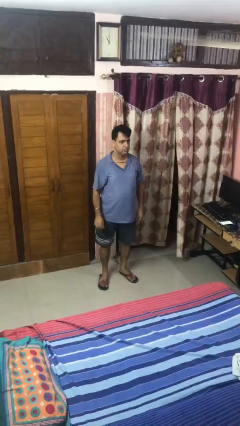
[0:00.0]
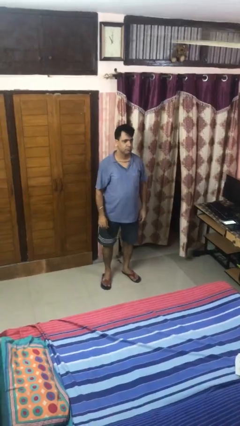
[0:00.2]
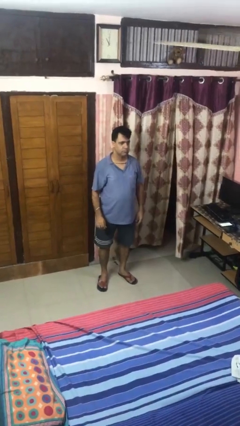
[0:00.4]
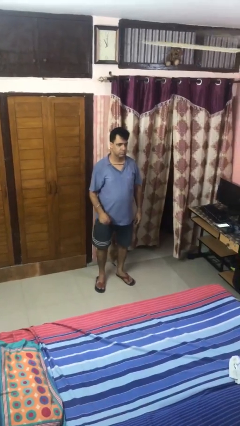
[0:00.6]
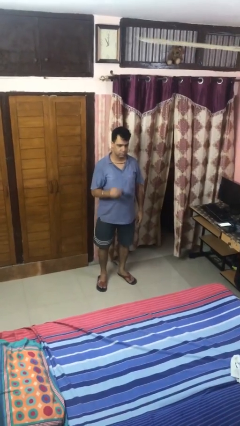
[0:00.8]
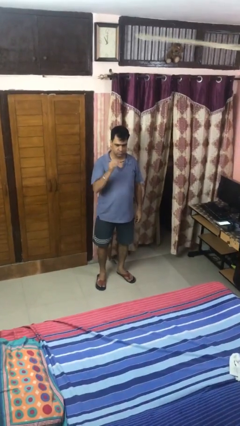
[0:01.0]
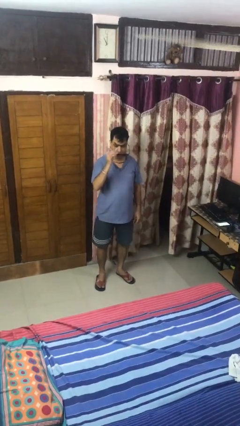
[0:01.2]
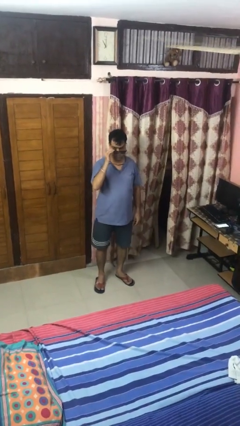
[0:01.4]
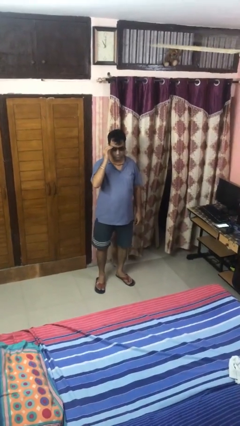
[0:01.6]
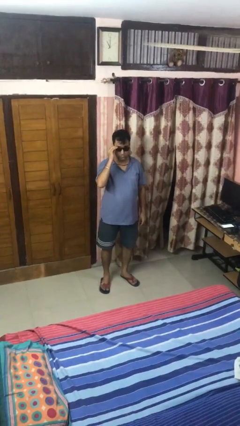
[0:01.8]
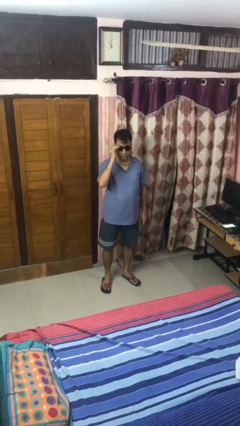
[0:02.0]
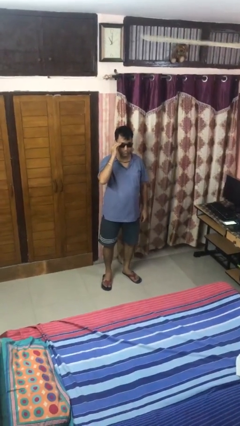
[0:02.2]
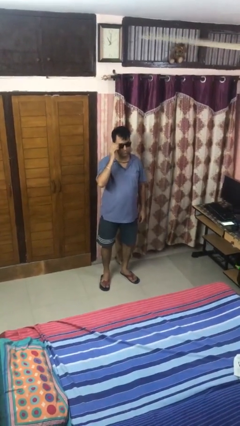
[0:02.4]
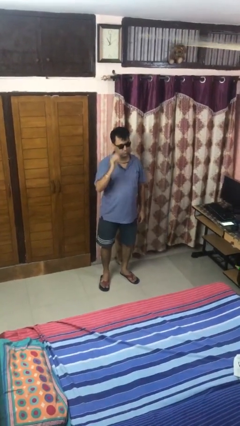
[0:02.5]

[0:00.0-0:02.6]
person puts on sunglasses

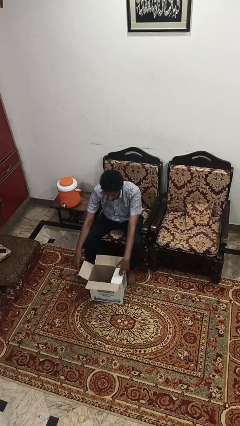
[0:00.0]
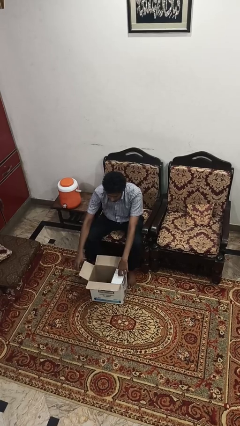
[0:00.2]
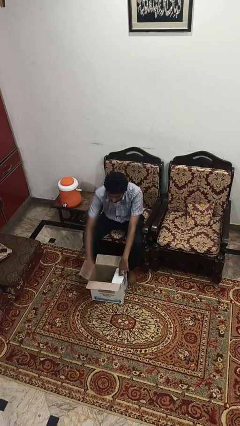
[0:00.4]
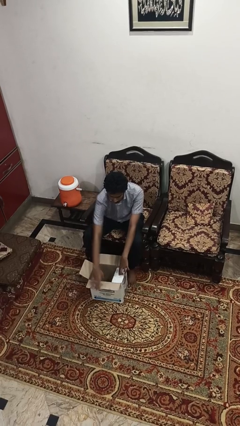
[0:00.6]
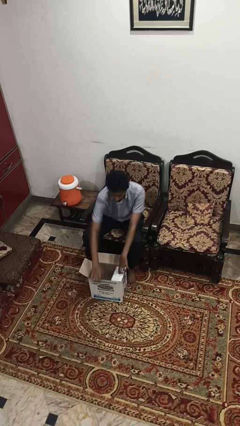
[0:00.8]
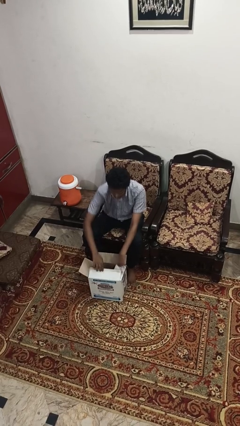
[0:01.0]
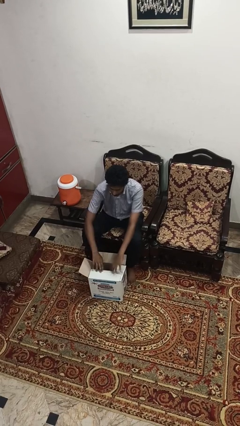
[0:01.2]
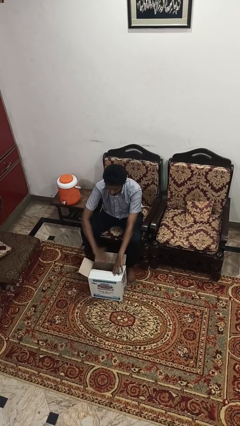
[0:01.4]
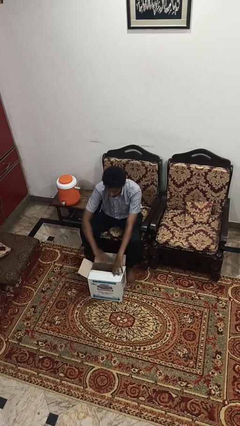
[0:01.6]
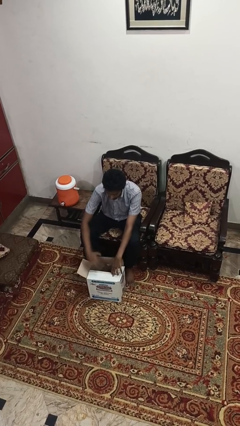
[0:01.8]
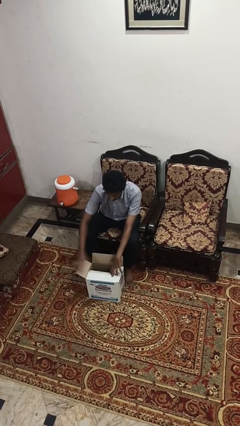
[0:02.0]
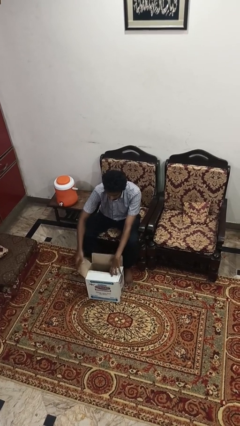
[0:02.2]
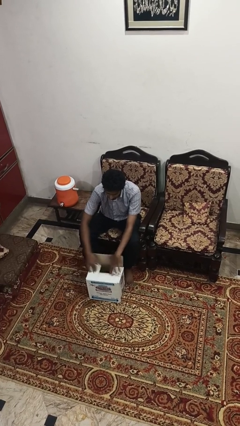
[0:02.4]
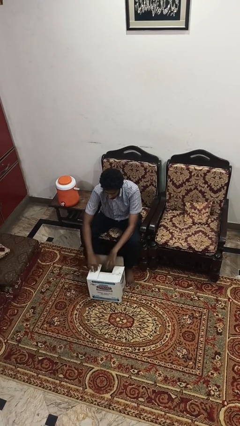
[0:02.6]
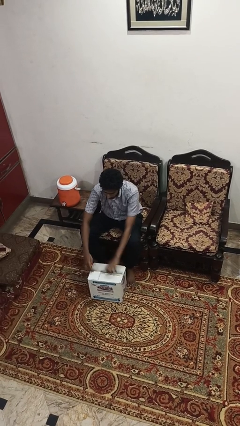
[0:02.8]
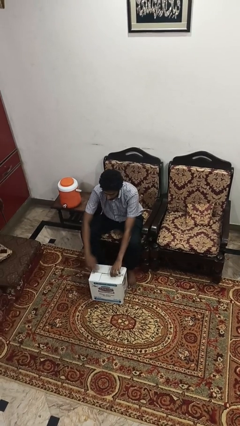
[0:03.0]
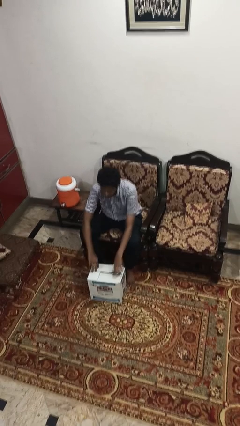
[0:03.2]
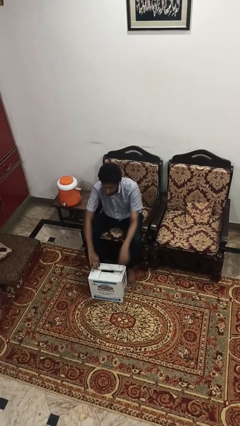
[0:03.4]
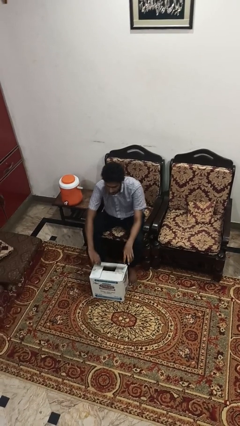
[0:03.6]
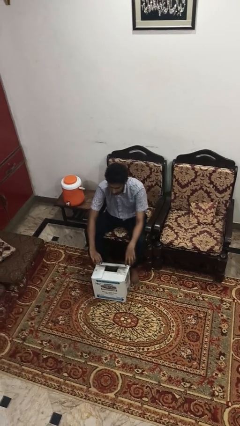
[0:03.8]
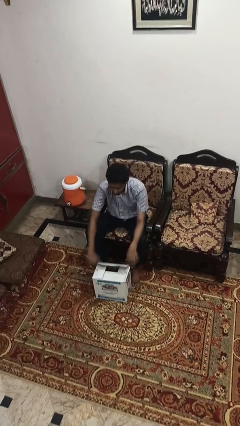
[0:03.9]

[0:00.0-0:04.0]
person closes box

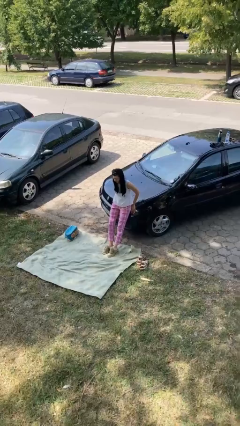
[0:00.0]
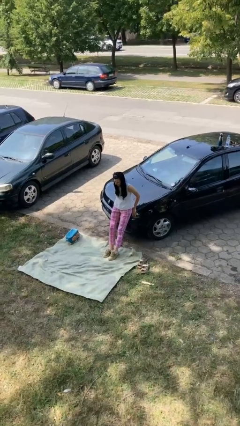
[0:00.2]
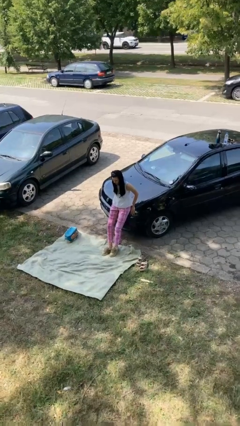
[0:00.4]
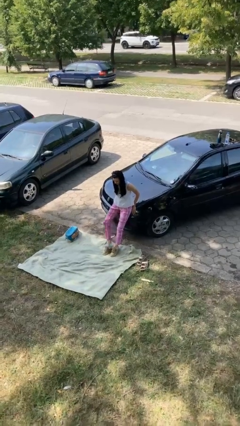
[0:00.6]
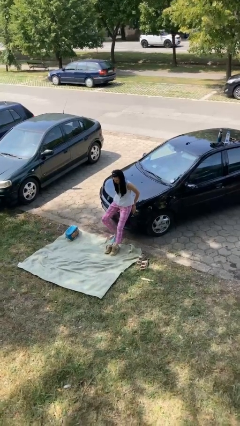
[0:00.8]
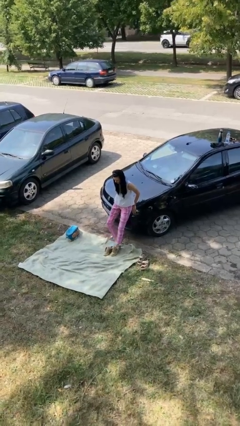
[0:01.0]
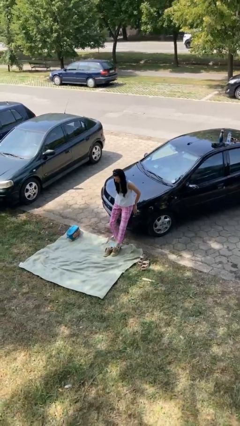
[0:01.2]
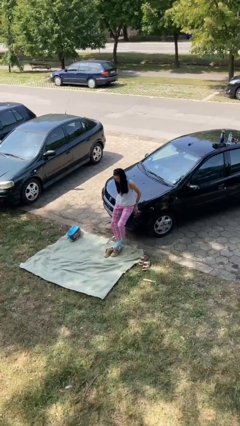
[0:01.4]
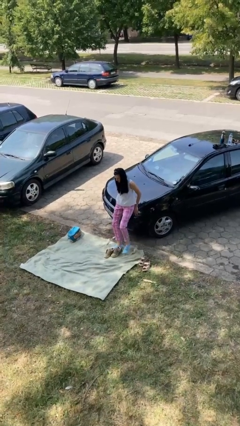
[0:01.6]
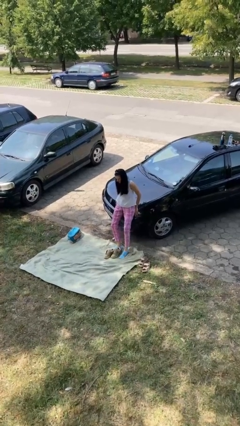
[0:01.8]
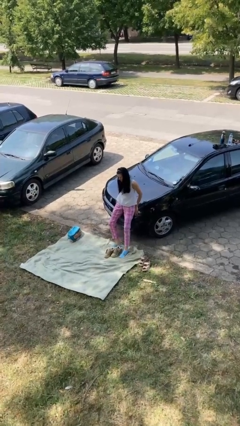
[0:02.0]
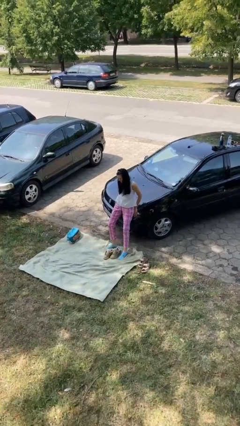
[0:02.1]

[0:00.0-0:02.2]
person takes off shoes

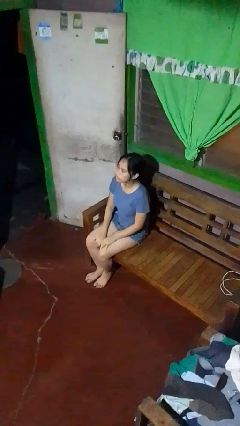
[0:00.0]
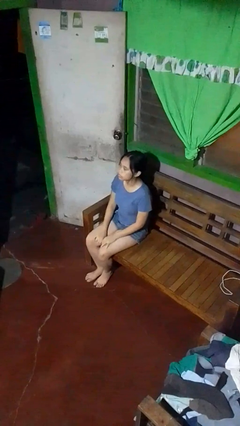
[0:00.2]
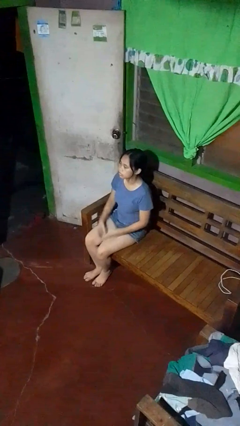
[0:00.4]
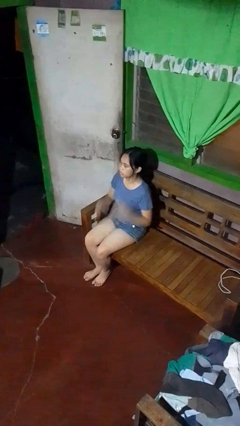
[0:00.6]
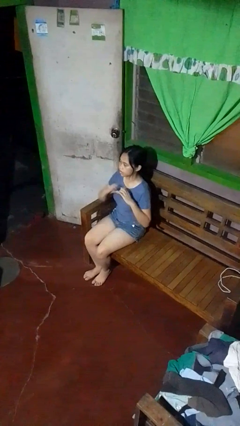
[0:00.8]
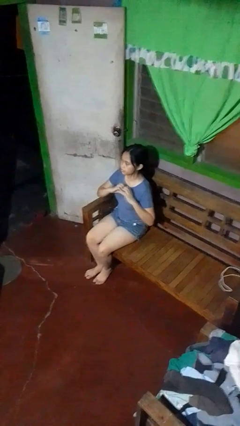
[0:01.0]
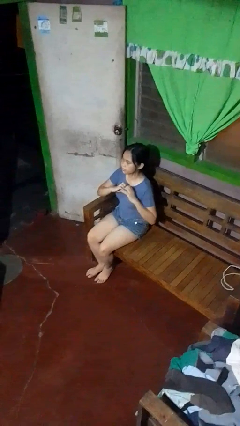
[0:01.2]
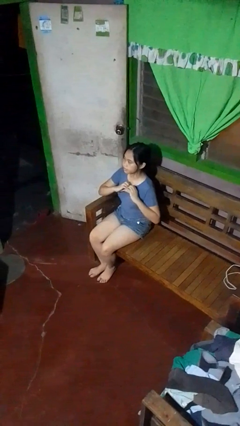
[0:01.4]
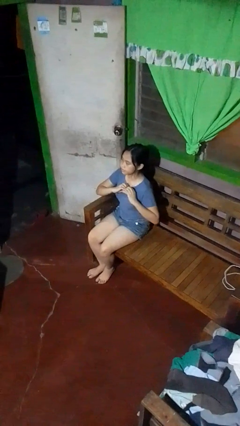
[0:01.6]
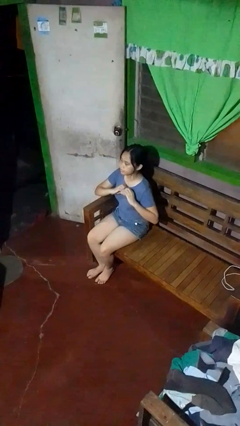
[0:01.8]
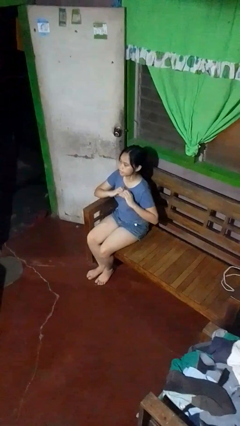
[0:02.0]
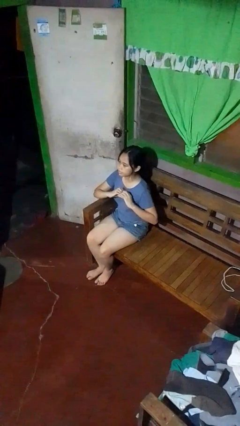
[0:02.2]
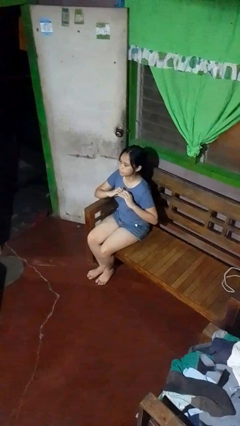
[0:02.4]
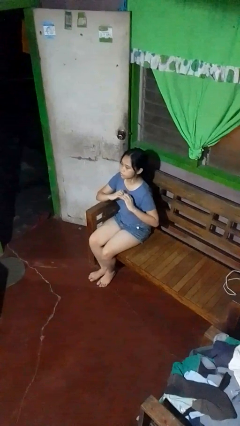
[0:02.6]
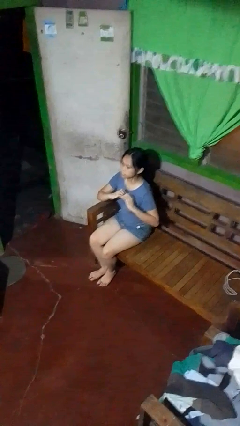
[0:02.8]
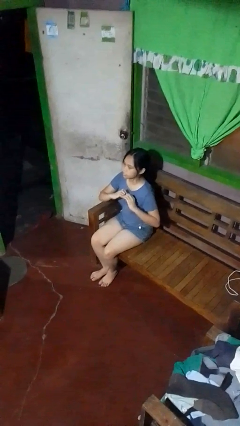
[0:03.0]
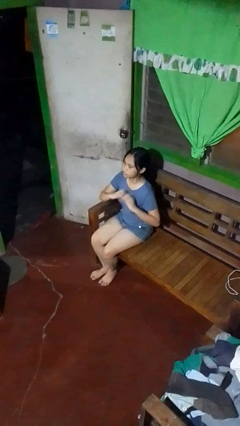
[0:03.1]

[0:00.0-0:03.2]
person gestures heart

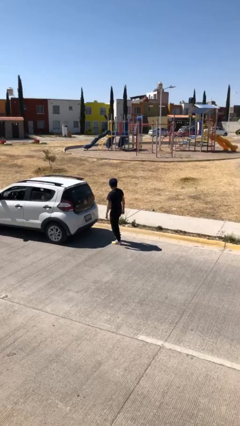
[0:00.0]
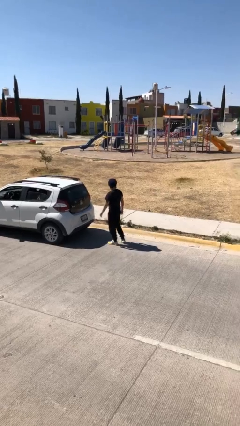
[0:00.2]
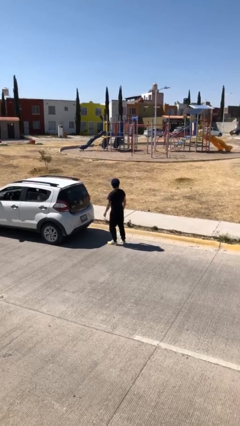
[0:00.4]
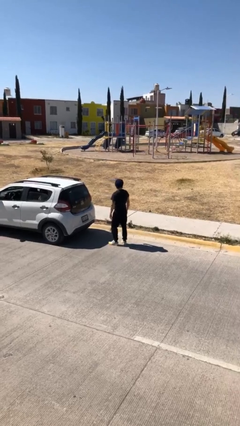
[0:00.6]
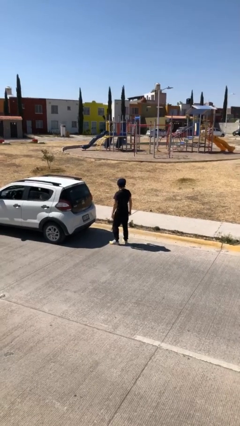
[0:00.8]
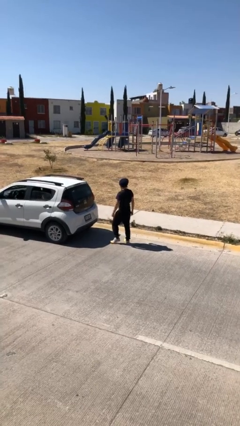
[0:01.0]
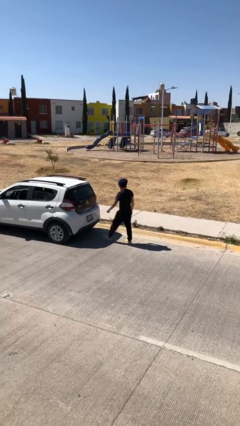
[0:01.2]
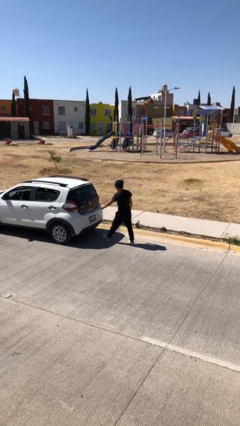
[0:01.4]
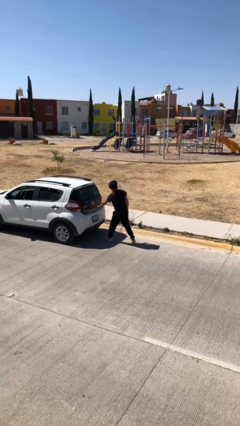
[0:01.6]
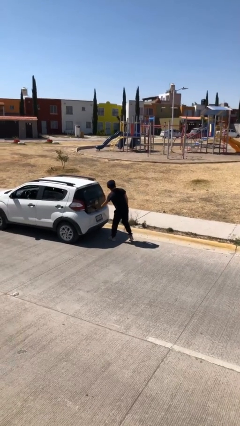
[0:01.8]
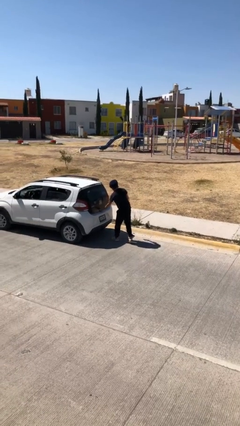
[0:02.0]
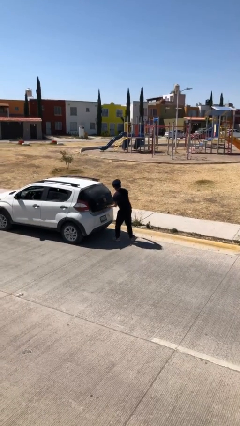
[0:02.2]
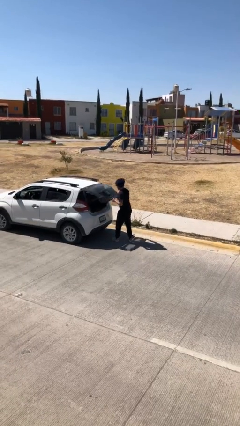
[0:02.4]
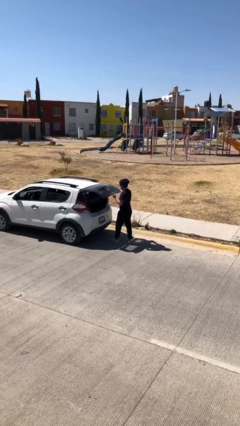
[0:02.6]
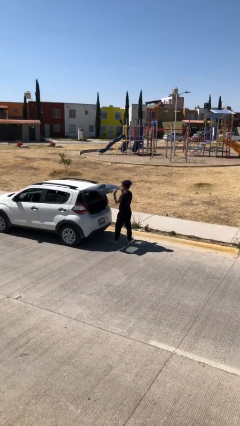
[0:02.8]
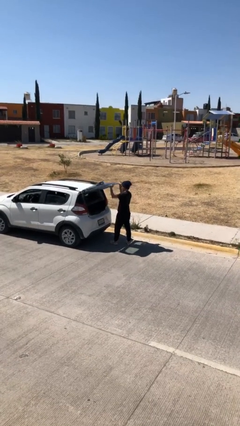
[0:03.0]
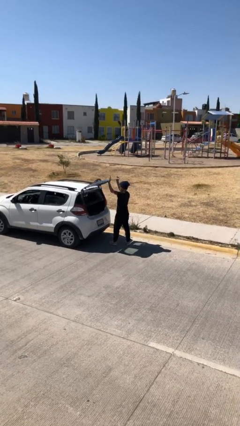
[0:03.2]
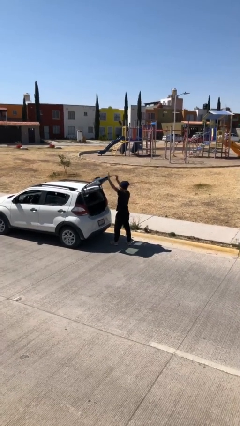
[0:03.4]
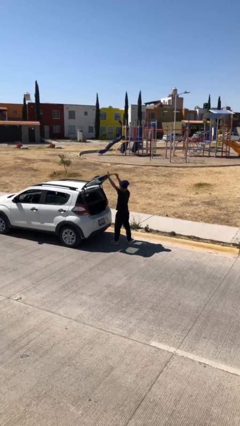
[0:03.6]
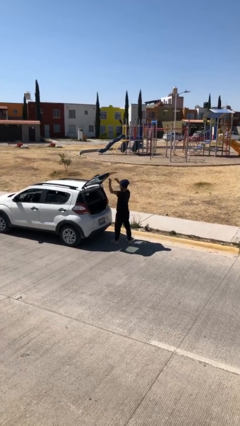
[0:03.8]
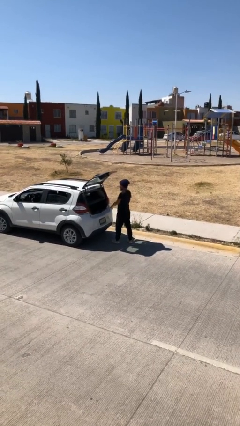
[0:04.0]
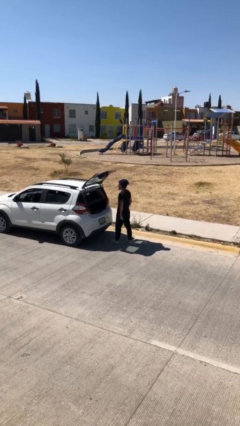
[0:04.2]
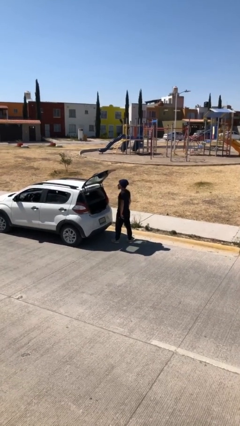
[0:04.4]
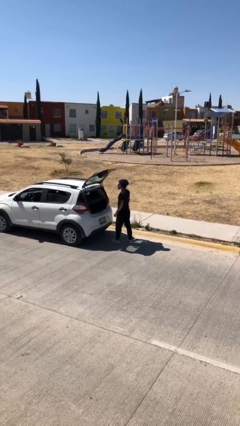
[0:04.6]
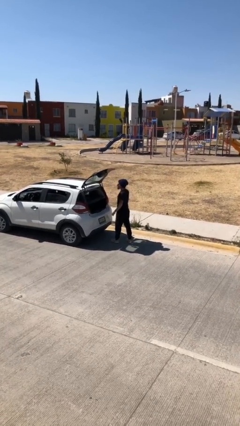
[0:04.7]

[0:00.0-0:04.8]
person opens car trunk

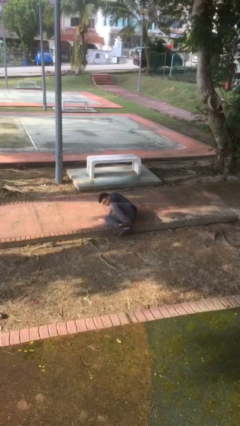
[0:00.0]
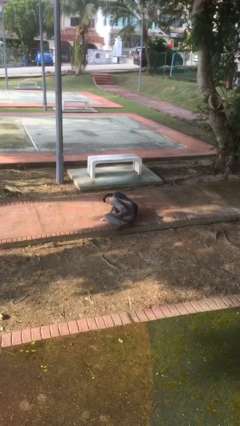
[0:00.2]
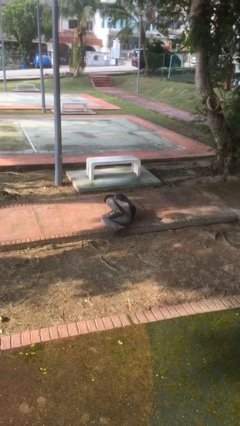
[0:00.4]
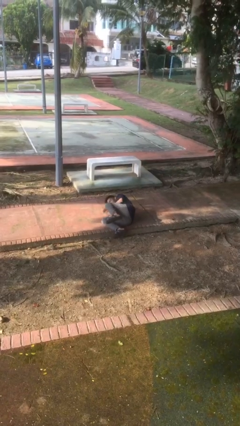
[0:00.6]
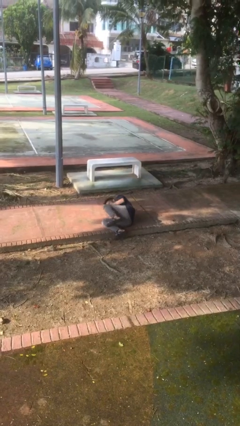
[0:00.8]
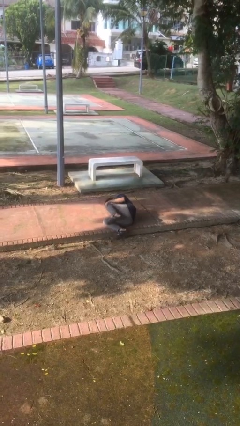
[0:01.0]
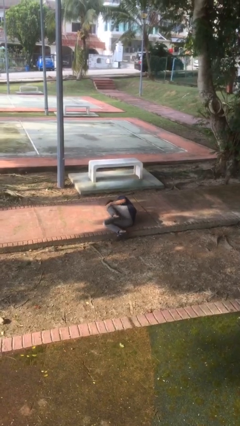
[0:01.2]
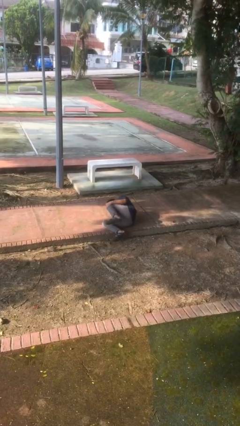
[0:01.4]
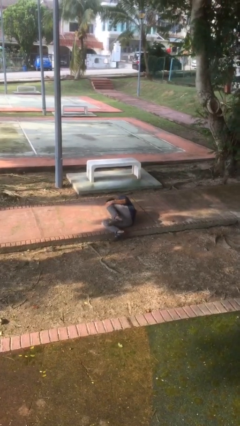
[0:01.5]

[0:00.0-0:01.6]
person lies down on floor
